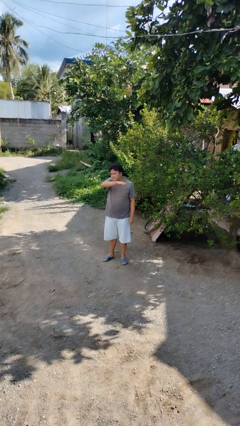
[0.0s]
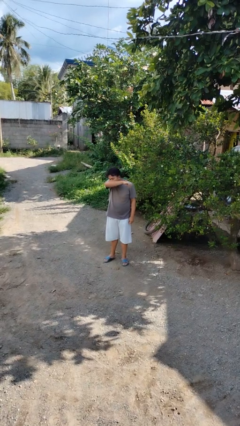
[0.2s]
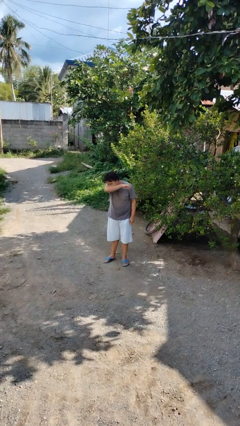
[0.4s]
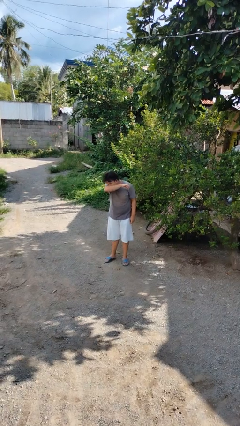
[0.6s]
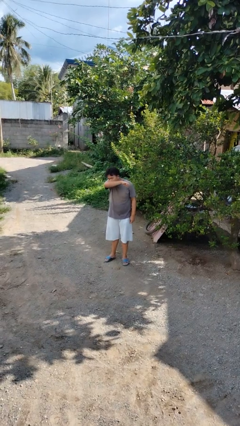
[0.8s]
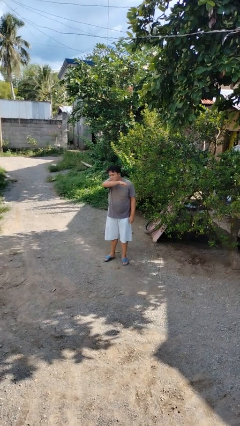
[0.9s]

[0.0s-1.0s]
person sneezes into arm

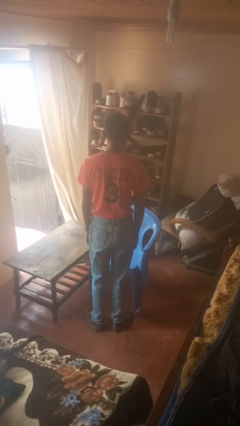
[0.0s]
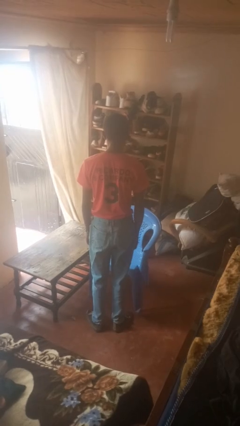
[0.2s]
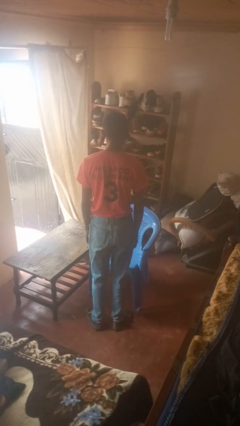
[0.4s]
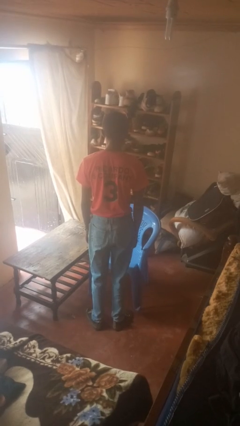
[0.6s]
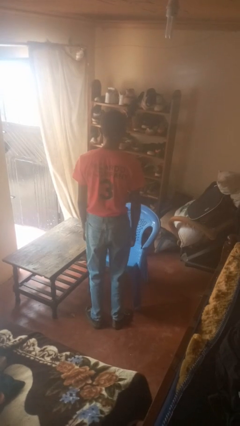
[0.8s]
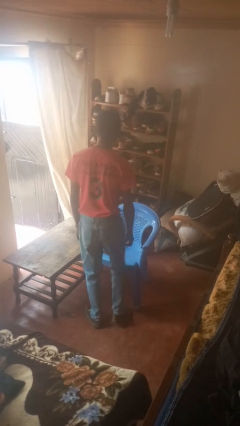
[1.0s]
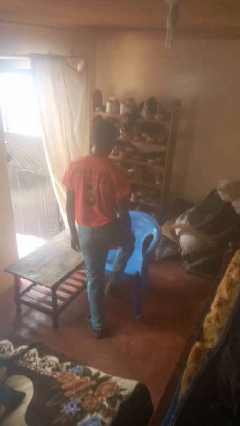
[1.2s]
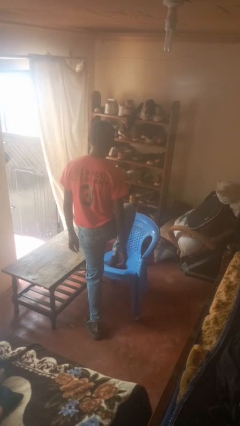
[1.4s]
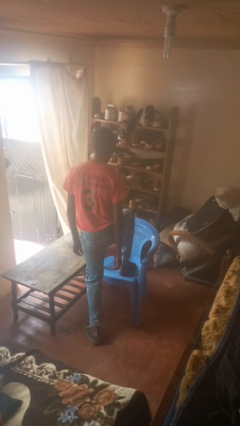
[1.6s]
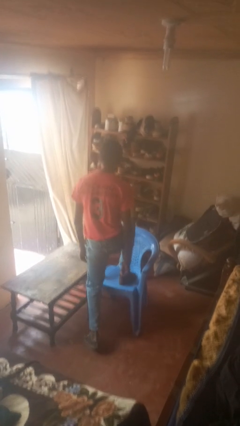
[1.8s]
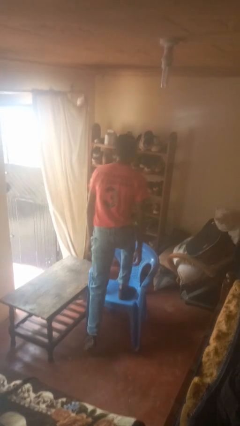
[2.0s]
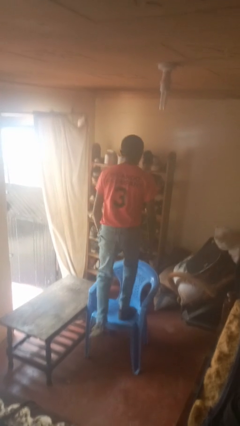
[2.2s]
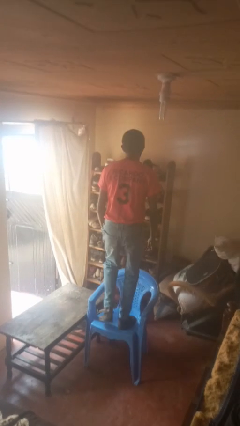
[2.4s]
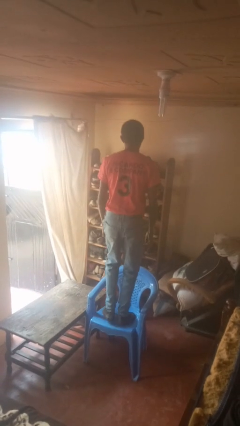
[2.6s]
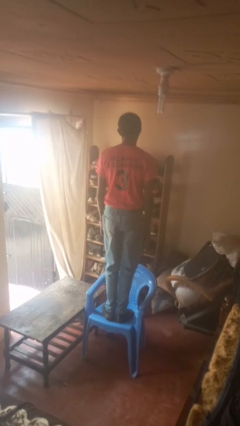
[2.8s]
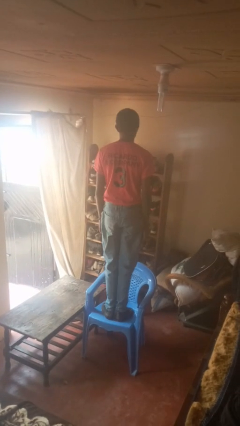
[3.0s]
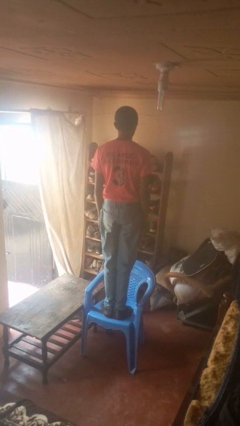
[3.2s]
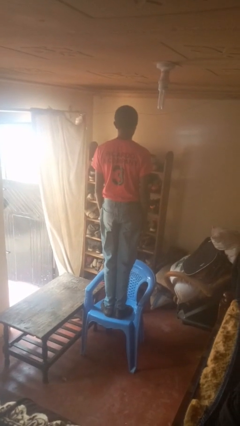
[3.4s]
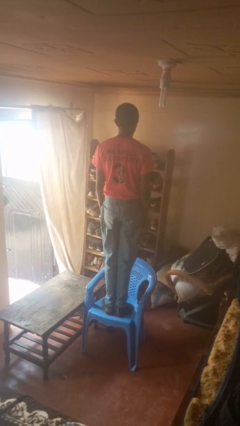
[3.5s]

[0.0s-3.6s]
person climbs on chair

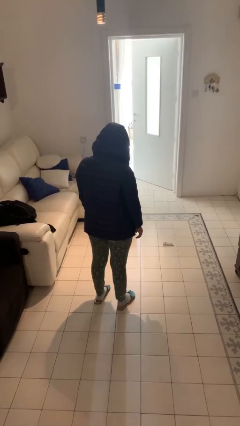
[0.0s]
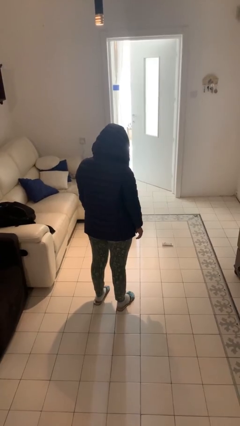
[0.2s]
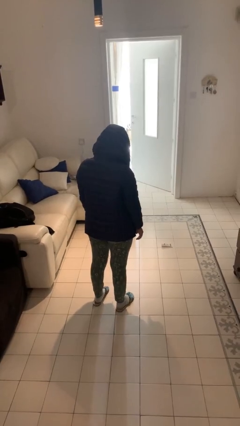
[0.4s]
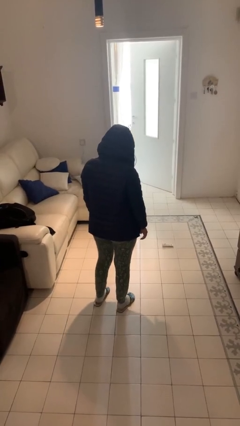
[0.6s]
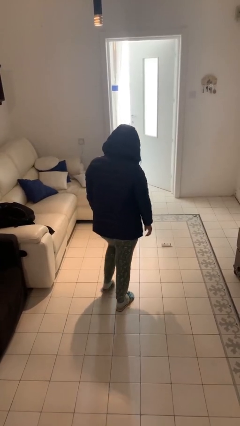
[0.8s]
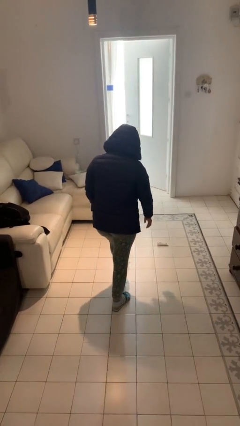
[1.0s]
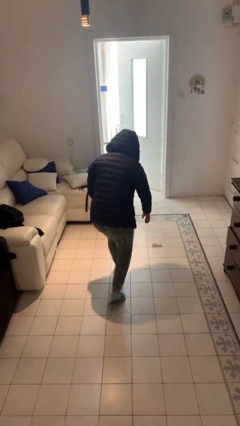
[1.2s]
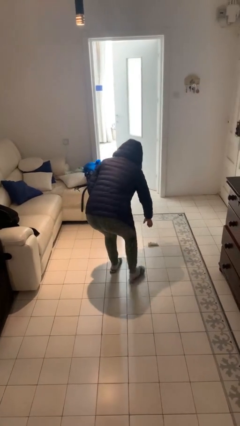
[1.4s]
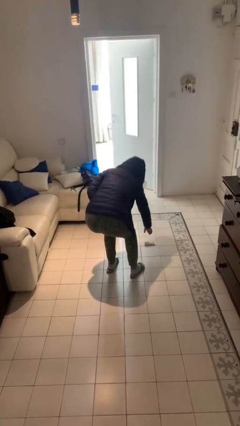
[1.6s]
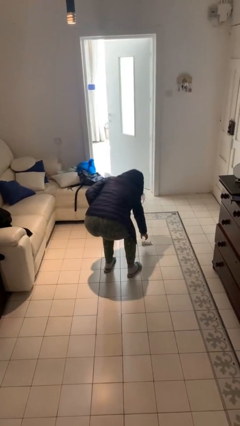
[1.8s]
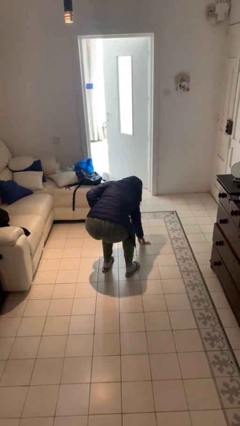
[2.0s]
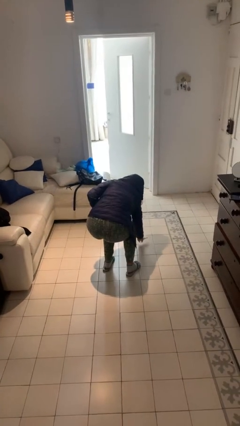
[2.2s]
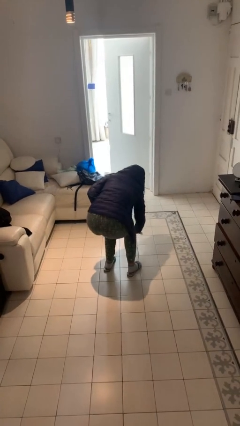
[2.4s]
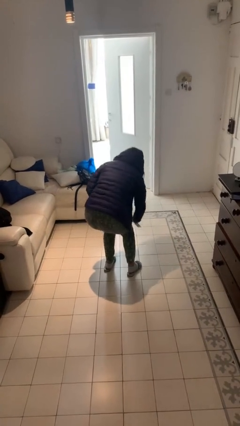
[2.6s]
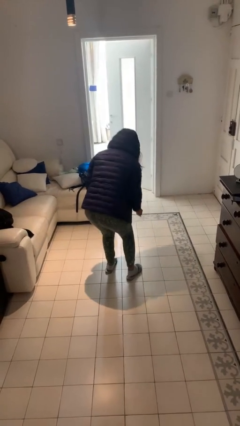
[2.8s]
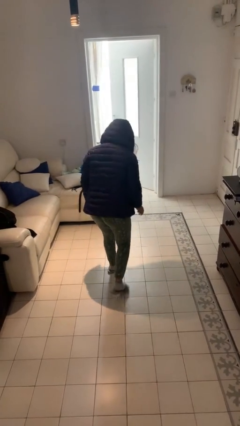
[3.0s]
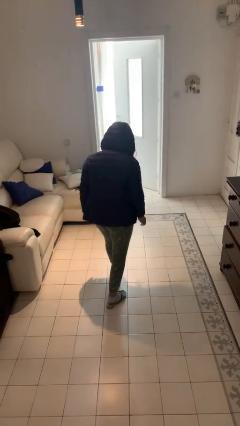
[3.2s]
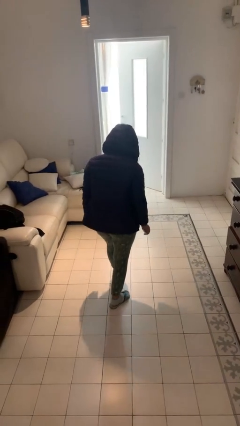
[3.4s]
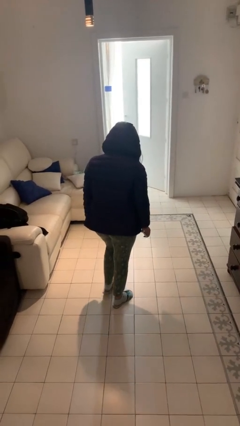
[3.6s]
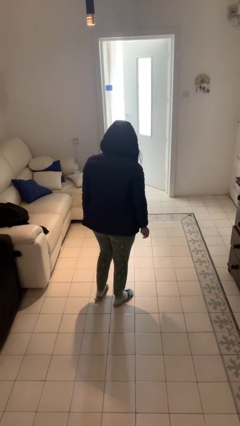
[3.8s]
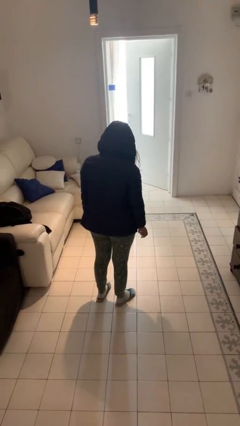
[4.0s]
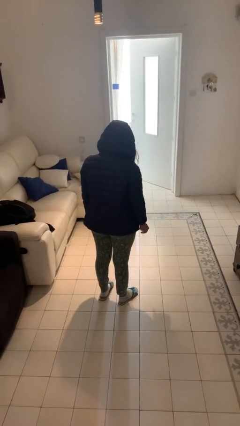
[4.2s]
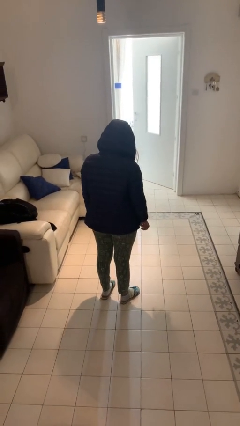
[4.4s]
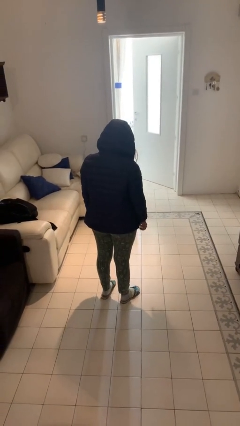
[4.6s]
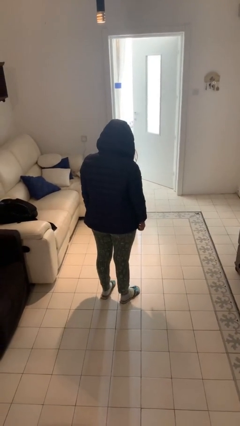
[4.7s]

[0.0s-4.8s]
person picks up object from floor

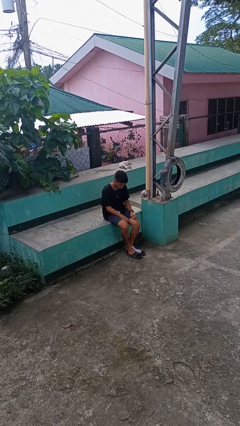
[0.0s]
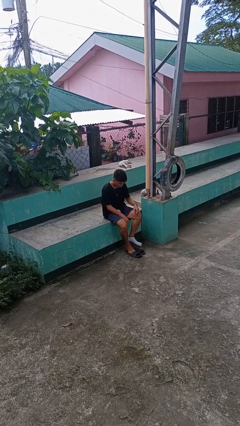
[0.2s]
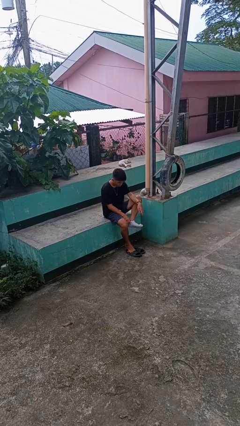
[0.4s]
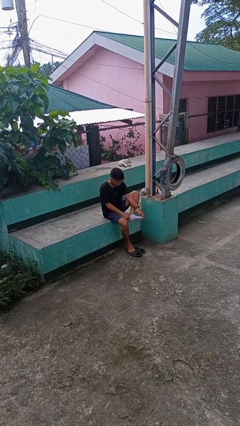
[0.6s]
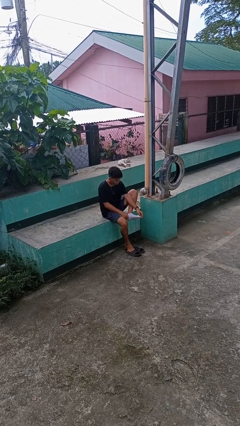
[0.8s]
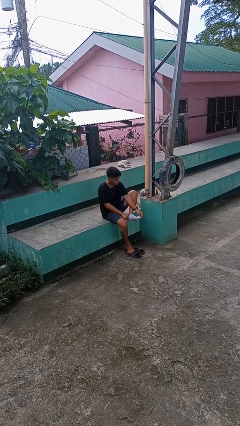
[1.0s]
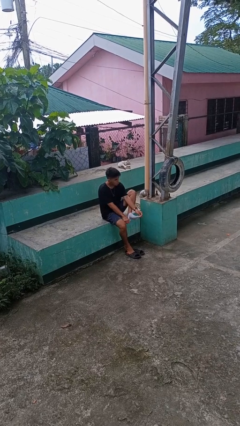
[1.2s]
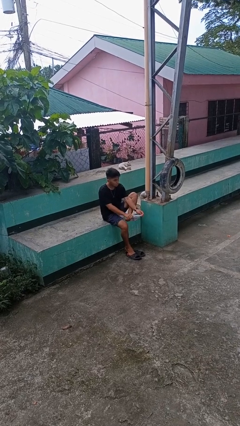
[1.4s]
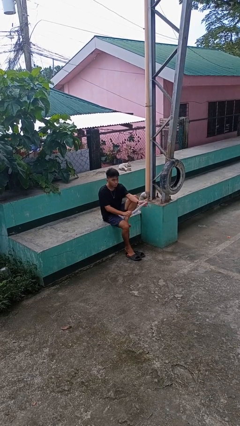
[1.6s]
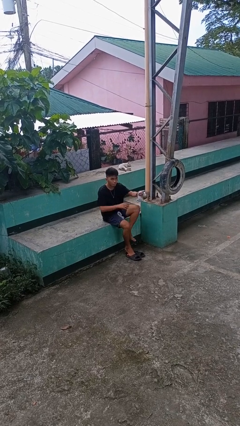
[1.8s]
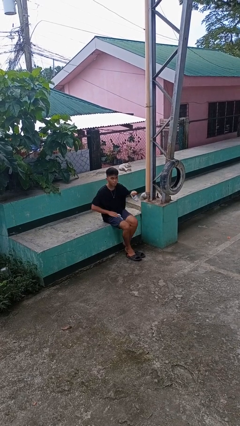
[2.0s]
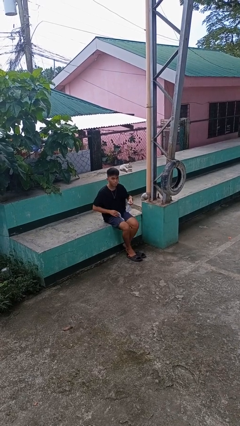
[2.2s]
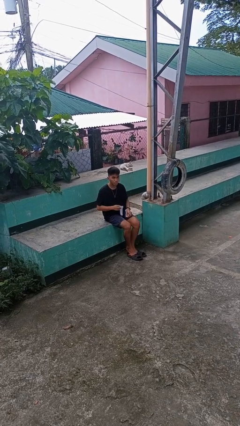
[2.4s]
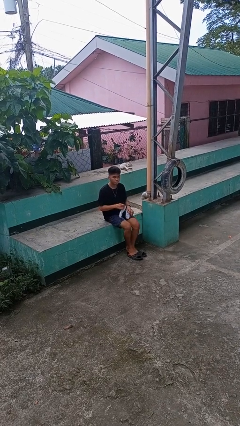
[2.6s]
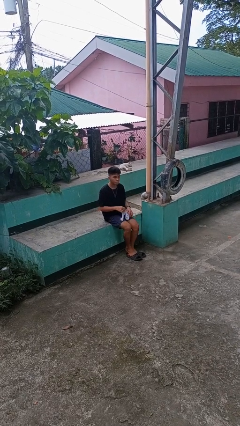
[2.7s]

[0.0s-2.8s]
person takes off socks

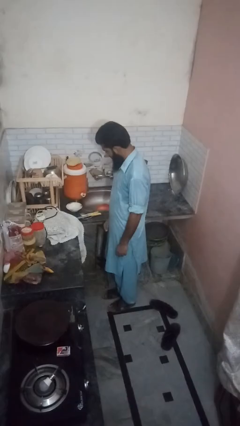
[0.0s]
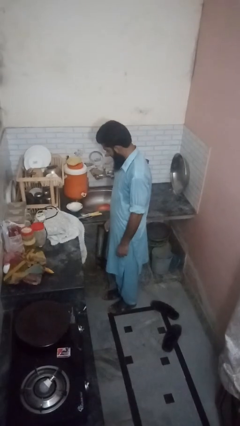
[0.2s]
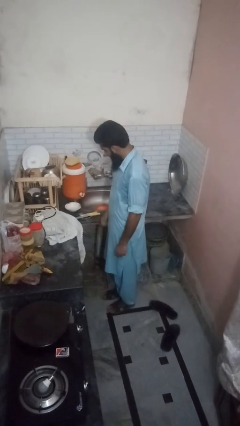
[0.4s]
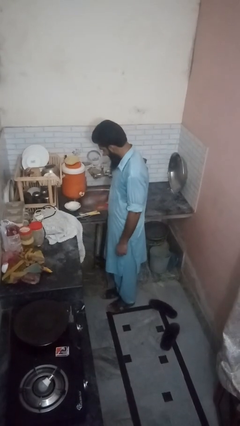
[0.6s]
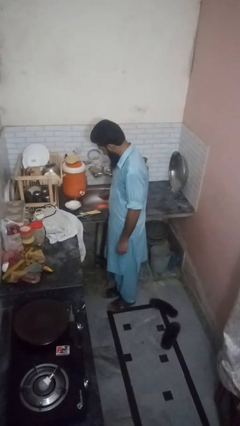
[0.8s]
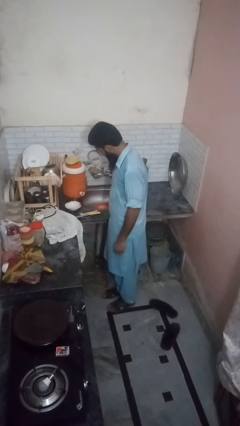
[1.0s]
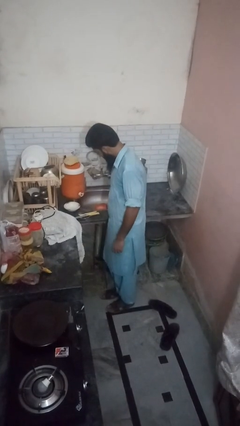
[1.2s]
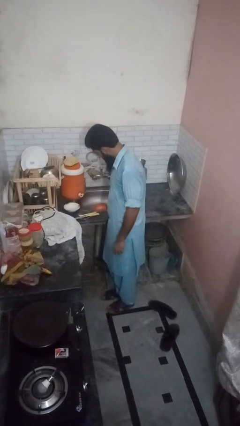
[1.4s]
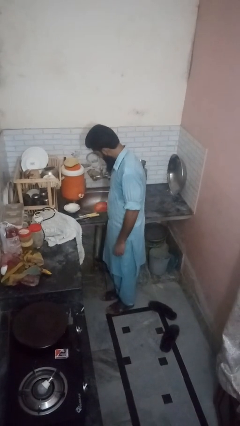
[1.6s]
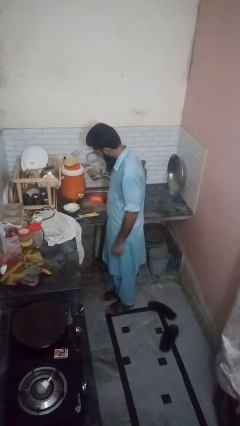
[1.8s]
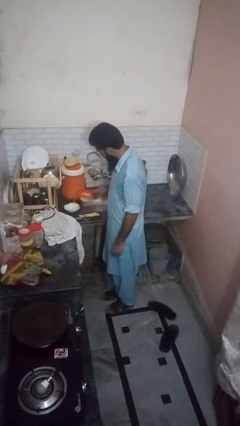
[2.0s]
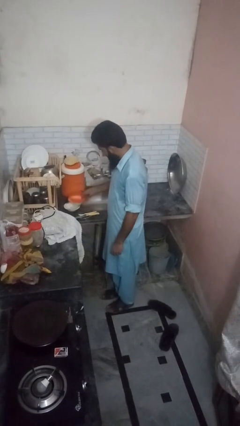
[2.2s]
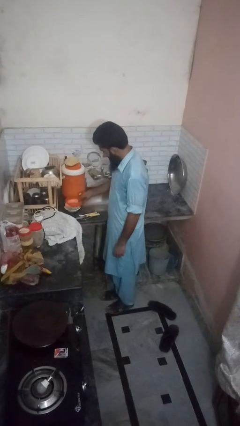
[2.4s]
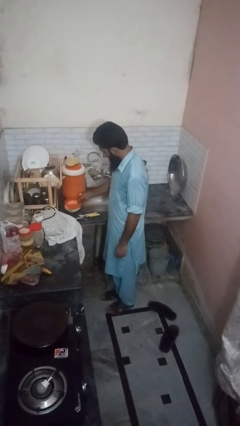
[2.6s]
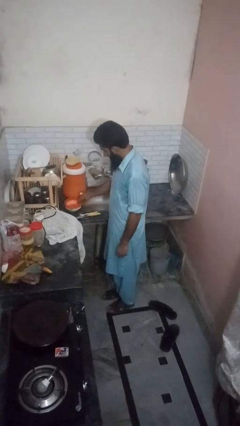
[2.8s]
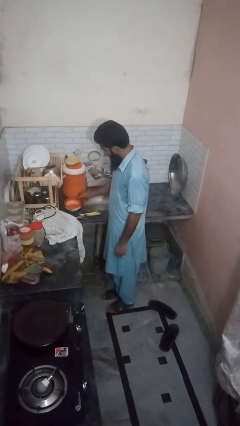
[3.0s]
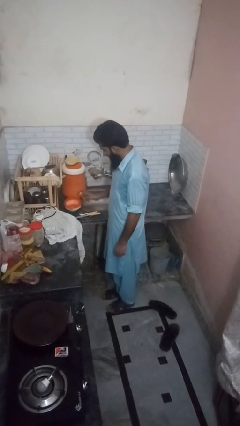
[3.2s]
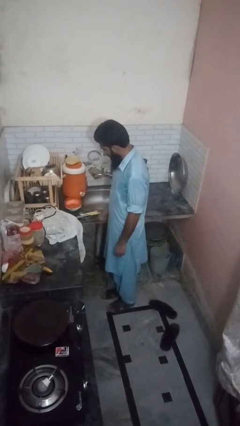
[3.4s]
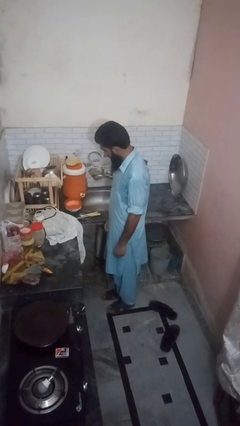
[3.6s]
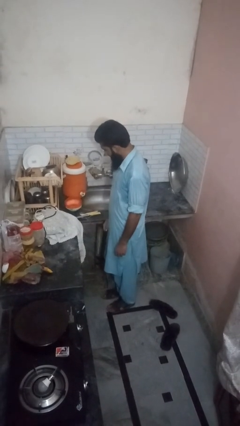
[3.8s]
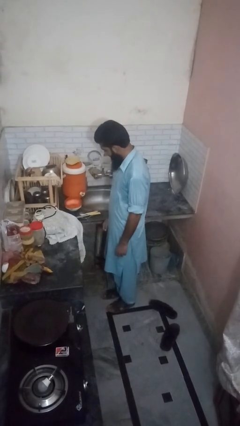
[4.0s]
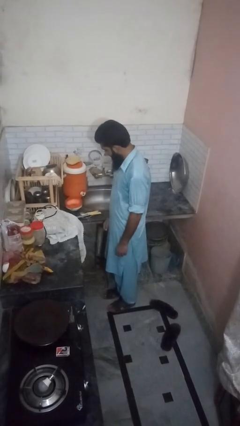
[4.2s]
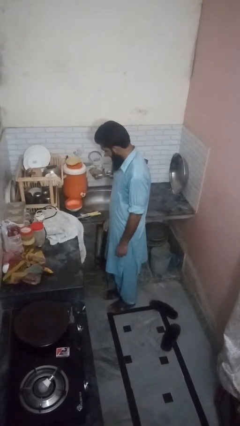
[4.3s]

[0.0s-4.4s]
person unloads dishwasher

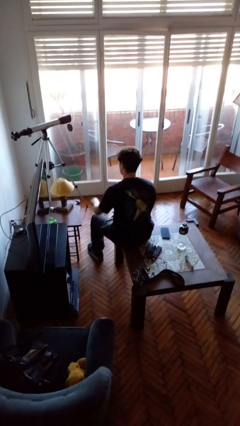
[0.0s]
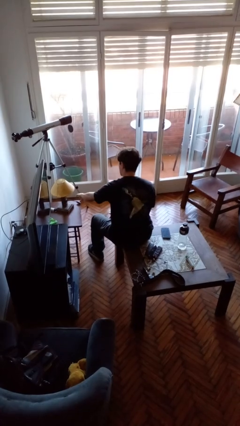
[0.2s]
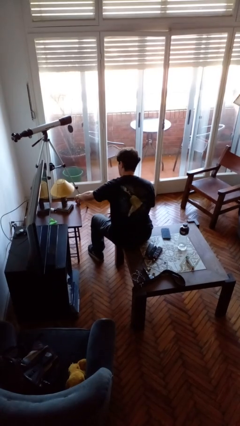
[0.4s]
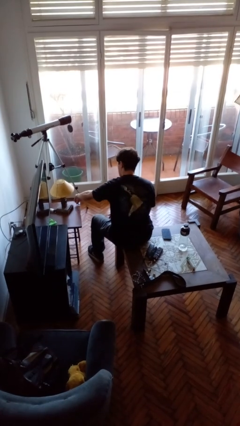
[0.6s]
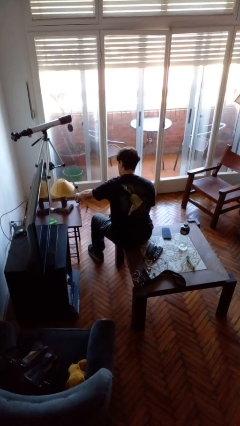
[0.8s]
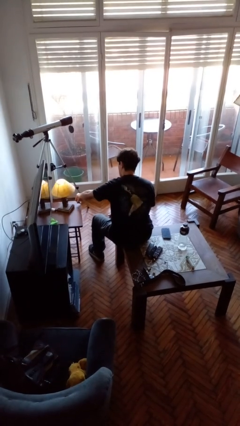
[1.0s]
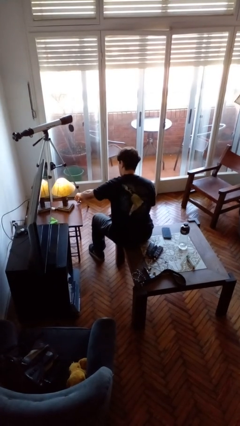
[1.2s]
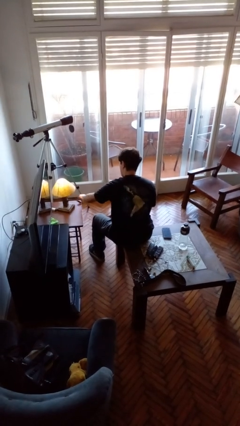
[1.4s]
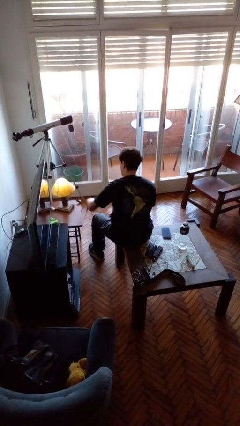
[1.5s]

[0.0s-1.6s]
person turns on lamp
